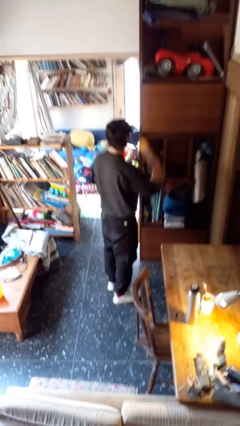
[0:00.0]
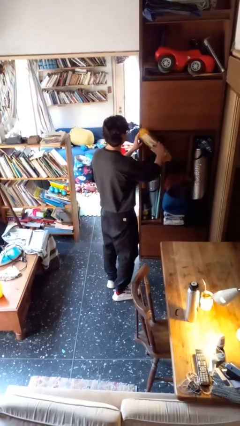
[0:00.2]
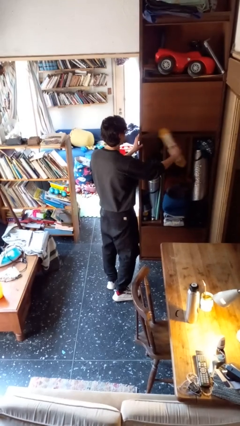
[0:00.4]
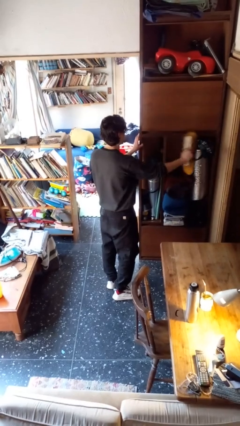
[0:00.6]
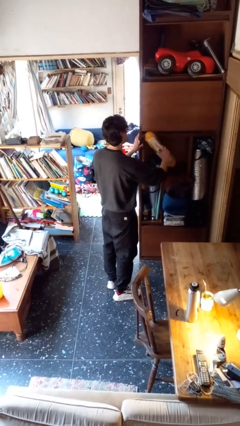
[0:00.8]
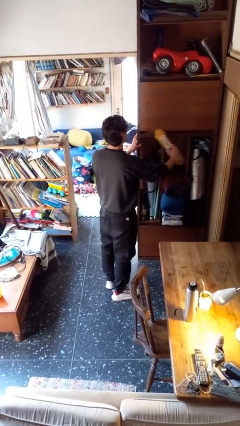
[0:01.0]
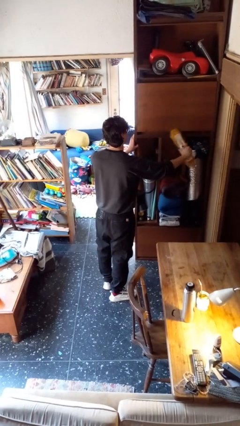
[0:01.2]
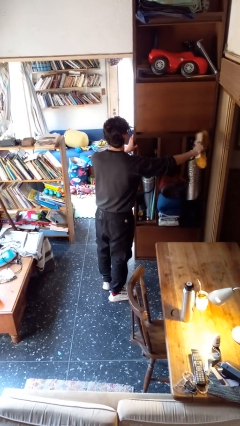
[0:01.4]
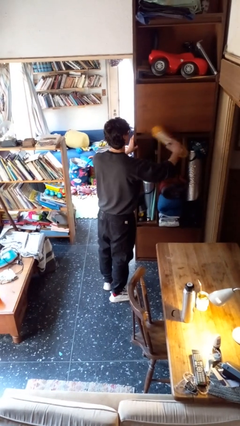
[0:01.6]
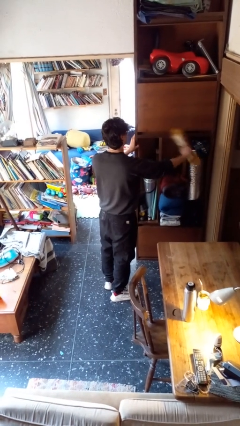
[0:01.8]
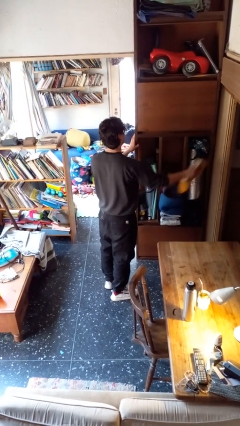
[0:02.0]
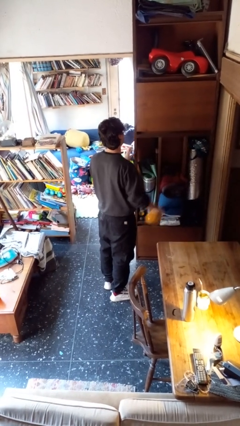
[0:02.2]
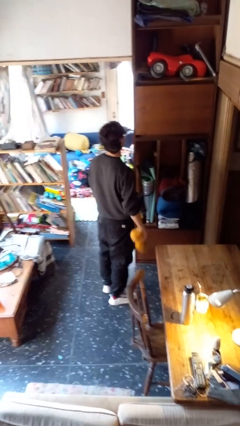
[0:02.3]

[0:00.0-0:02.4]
person dusts furniture

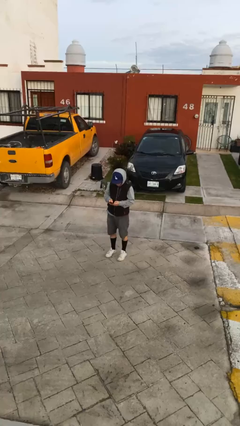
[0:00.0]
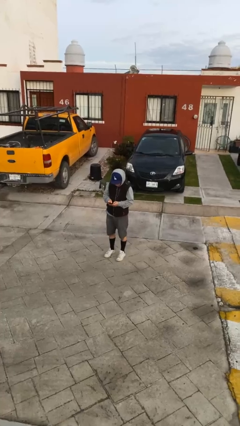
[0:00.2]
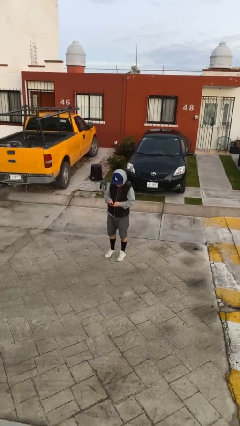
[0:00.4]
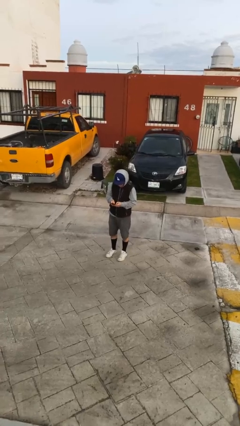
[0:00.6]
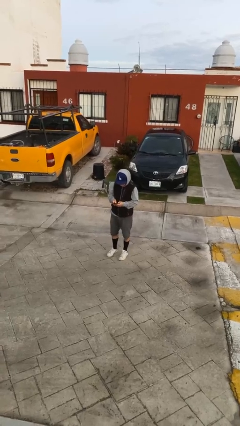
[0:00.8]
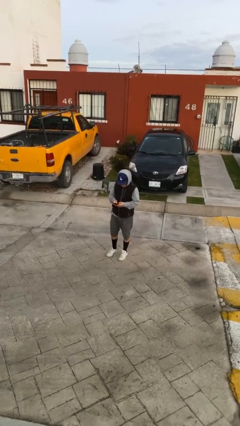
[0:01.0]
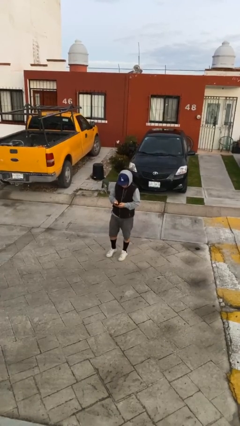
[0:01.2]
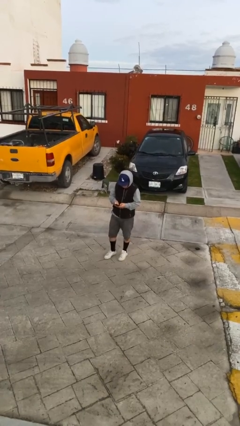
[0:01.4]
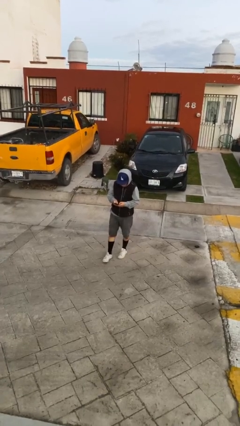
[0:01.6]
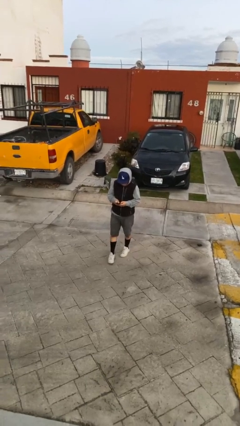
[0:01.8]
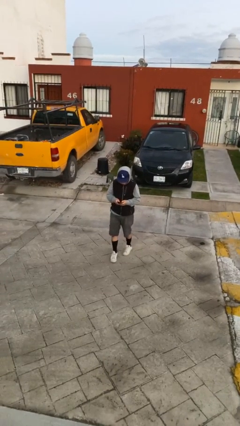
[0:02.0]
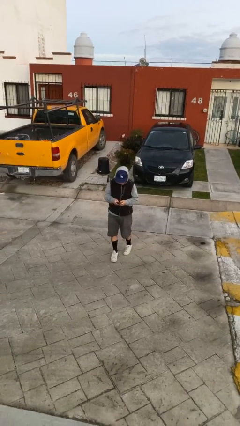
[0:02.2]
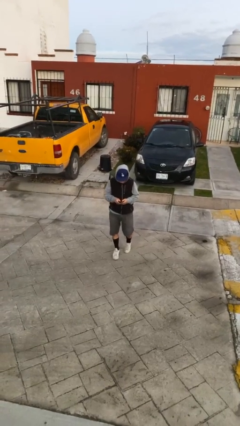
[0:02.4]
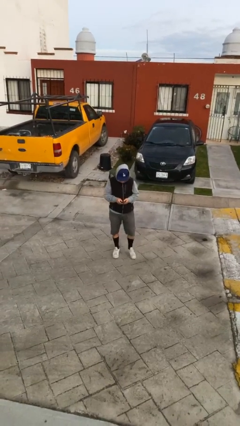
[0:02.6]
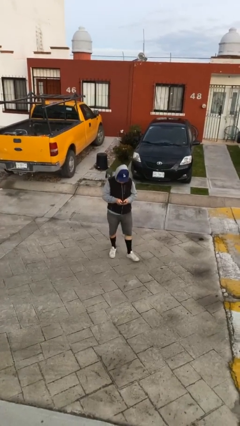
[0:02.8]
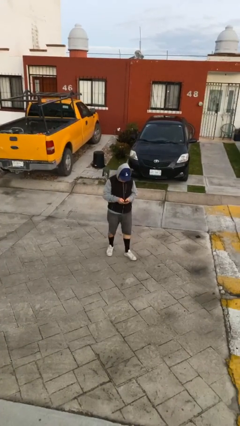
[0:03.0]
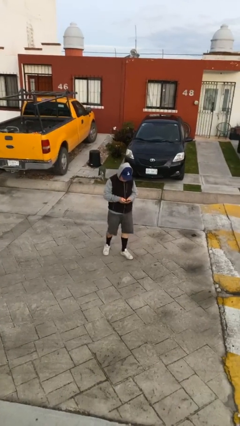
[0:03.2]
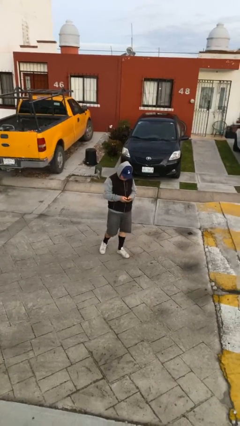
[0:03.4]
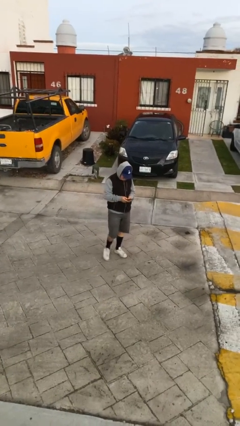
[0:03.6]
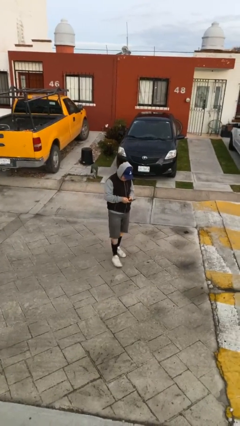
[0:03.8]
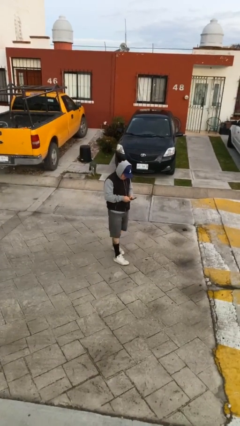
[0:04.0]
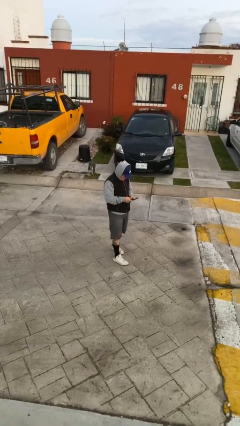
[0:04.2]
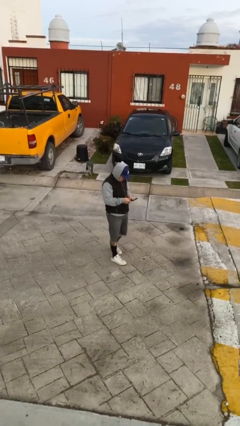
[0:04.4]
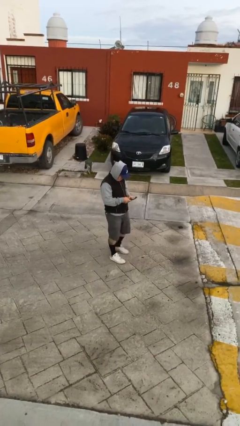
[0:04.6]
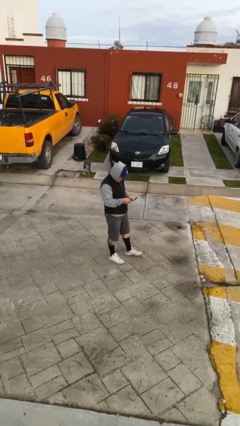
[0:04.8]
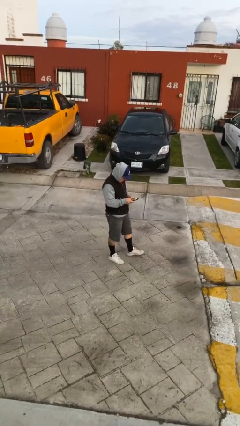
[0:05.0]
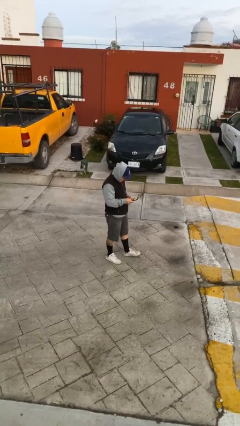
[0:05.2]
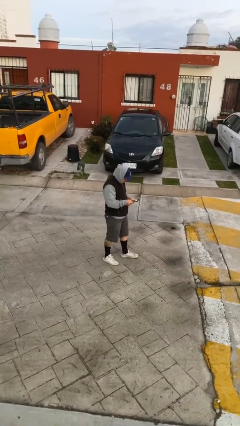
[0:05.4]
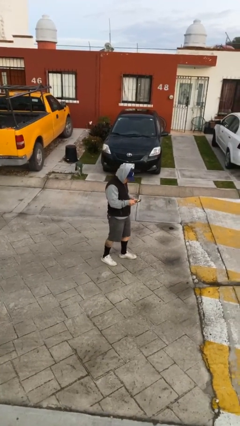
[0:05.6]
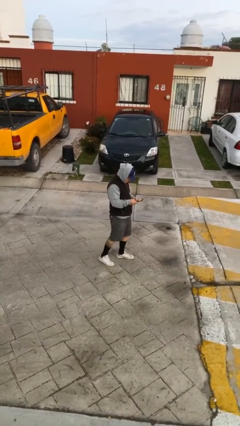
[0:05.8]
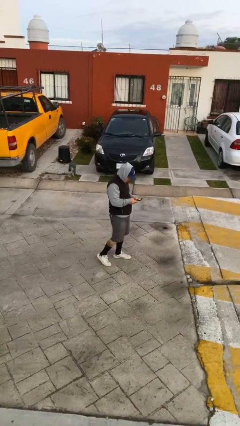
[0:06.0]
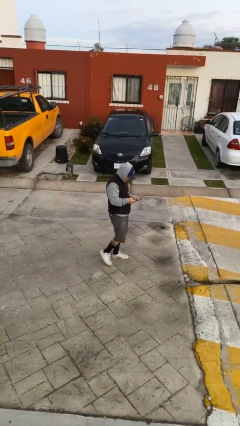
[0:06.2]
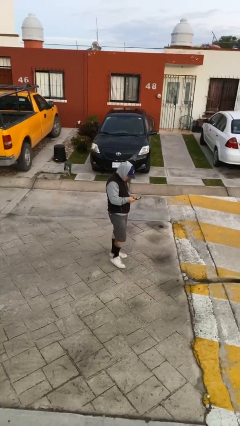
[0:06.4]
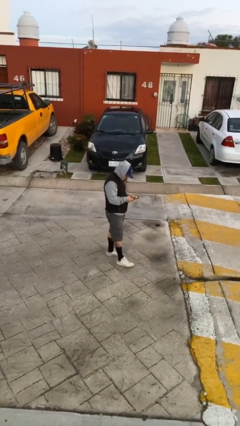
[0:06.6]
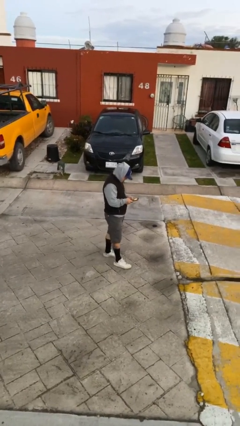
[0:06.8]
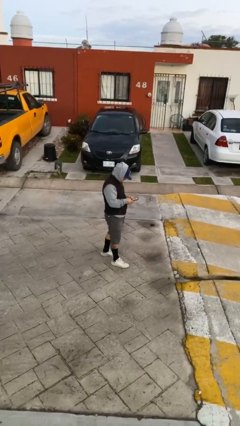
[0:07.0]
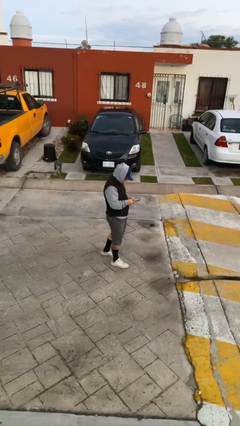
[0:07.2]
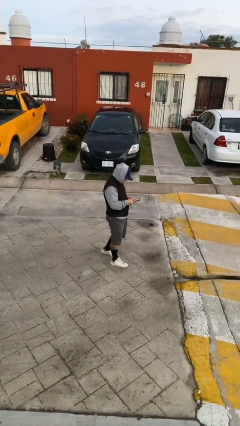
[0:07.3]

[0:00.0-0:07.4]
person texts on phone

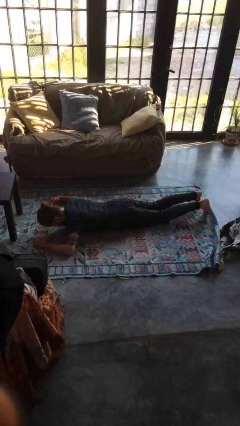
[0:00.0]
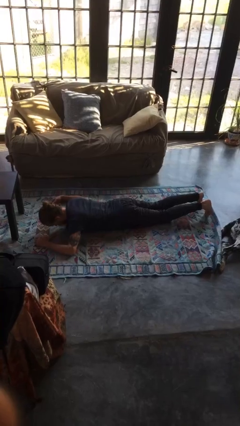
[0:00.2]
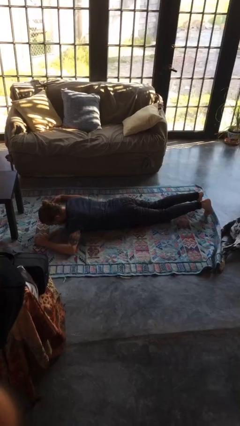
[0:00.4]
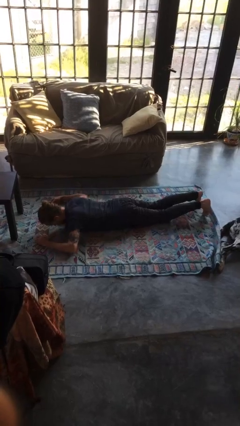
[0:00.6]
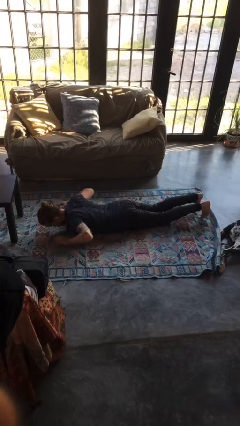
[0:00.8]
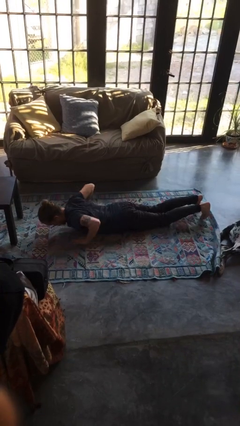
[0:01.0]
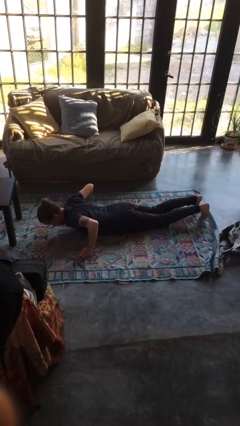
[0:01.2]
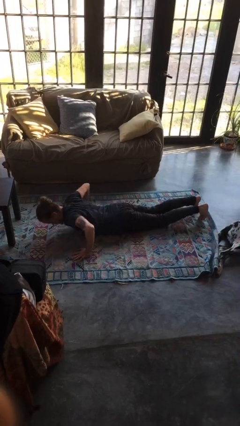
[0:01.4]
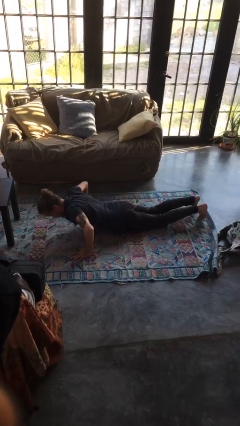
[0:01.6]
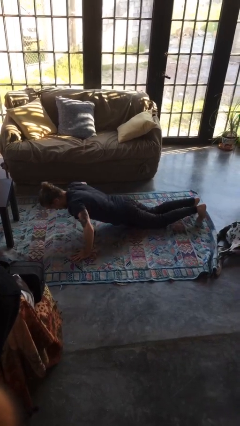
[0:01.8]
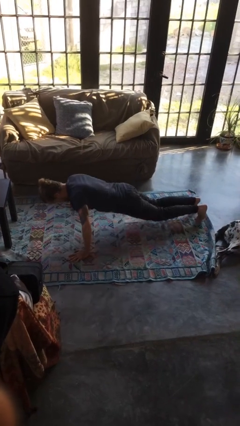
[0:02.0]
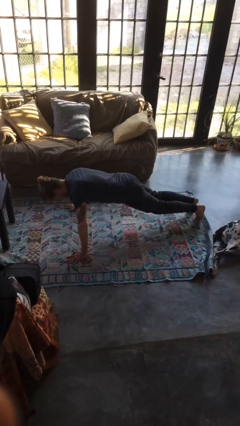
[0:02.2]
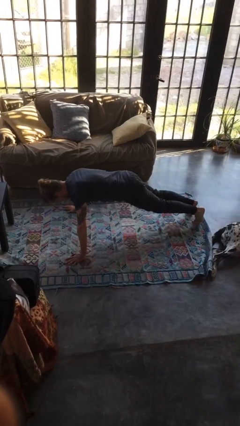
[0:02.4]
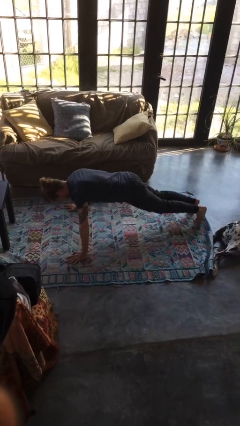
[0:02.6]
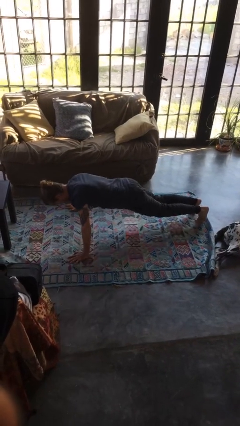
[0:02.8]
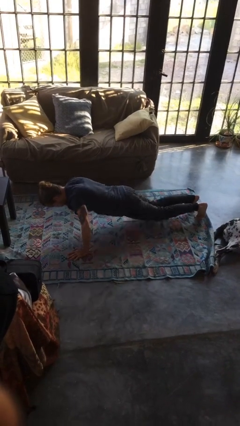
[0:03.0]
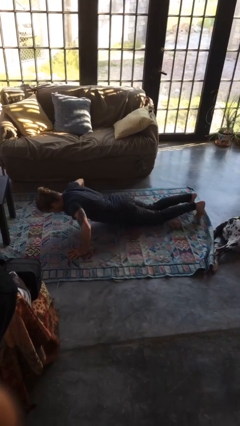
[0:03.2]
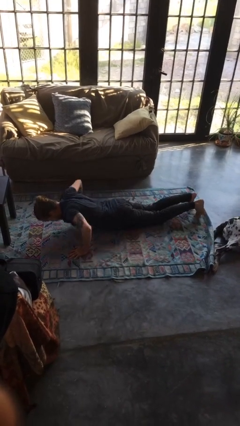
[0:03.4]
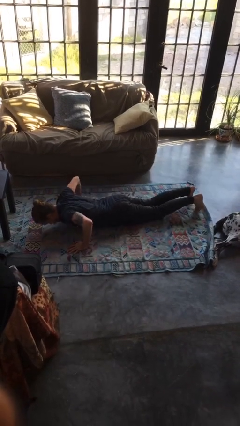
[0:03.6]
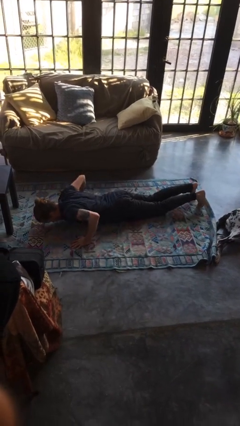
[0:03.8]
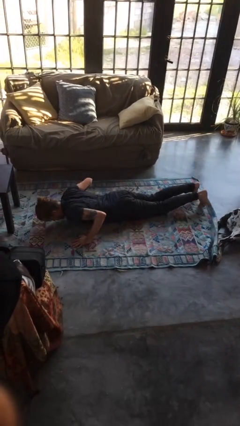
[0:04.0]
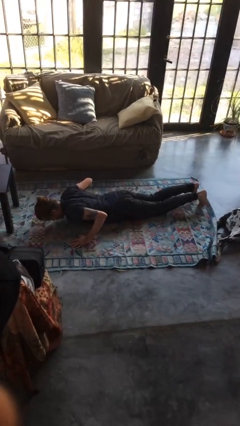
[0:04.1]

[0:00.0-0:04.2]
person exercises with pushup

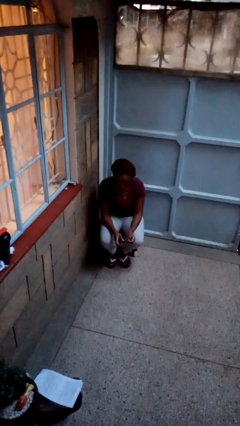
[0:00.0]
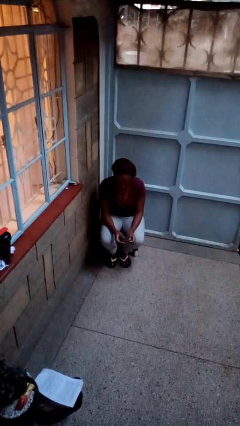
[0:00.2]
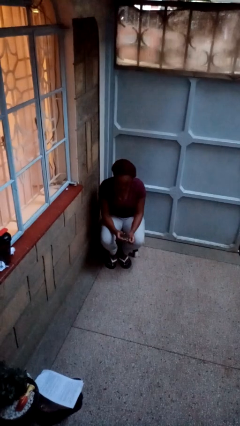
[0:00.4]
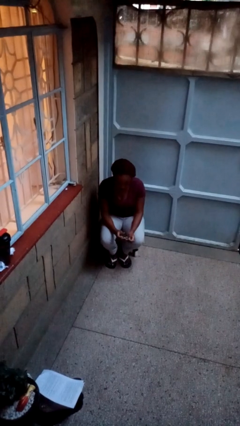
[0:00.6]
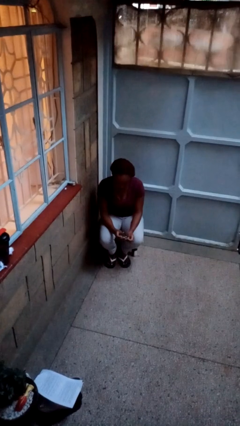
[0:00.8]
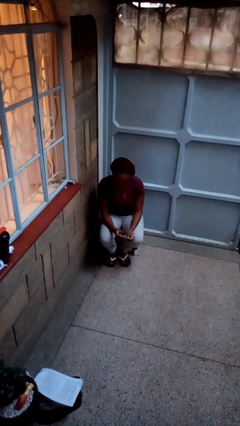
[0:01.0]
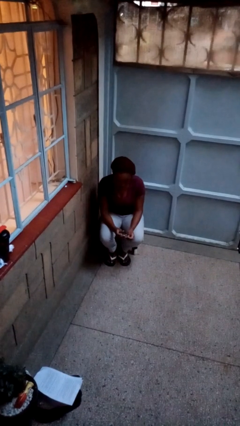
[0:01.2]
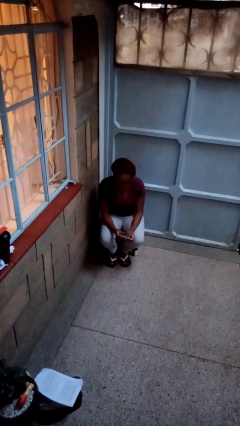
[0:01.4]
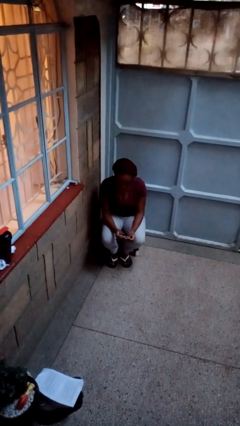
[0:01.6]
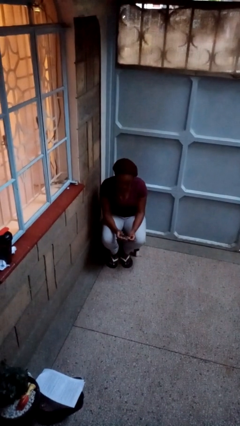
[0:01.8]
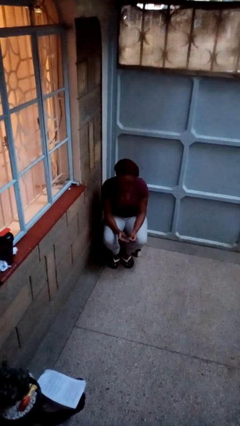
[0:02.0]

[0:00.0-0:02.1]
person clips fingernails

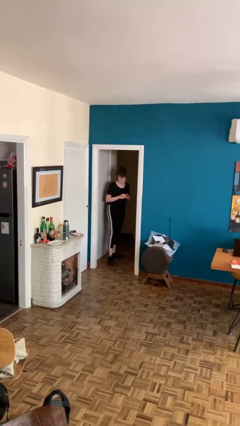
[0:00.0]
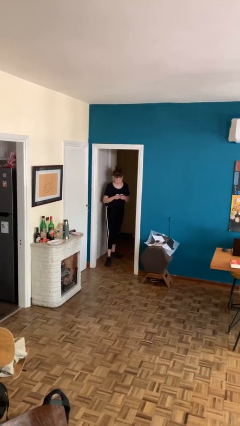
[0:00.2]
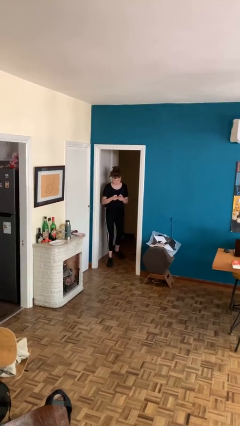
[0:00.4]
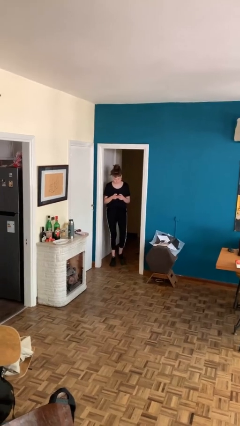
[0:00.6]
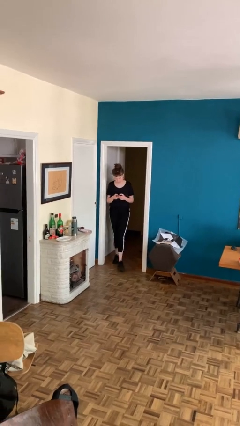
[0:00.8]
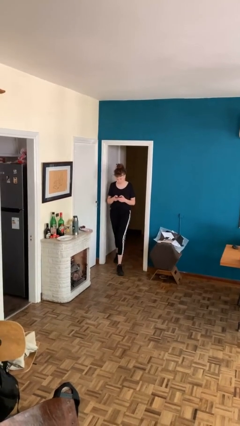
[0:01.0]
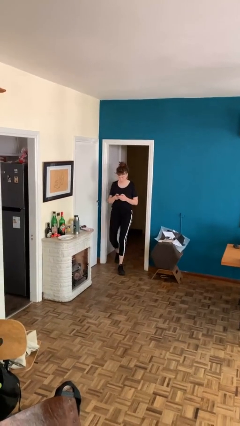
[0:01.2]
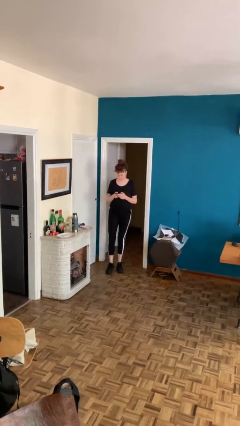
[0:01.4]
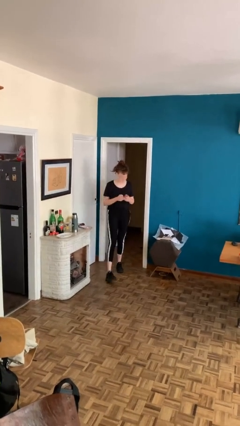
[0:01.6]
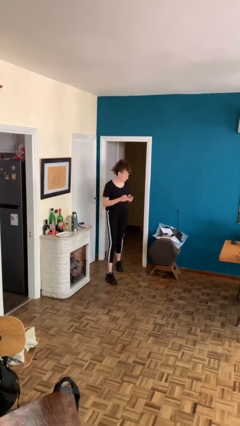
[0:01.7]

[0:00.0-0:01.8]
person enters scene through structure
